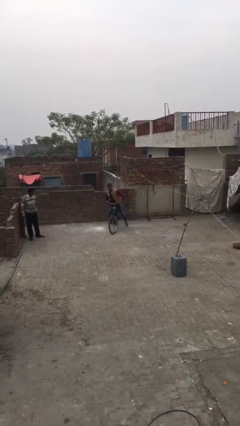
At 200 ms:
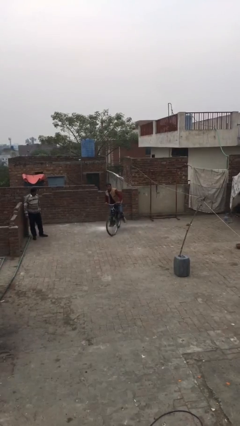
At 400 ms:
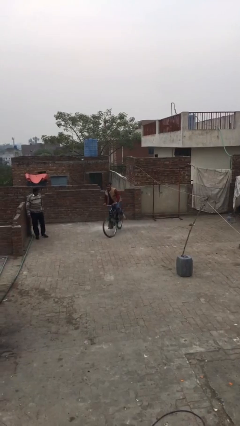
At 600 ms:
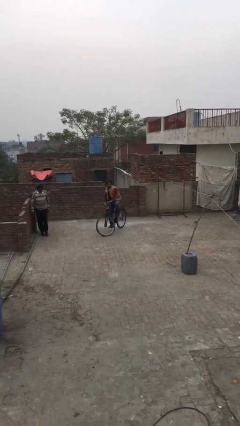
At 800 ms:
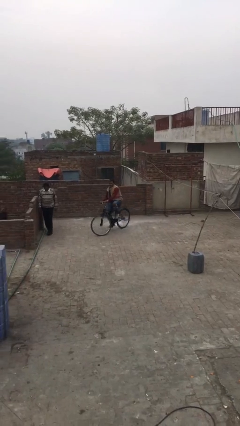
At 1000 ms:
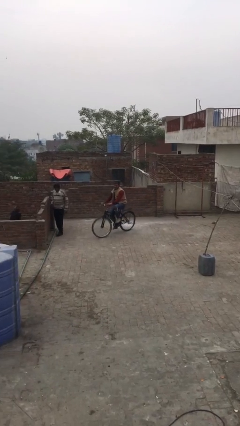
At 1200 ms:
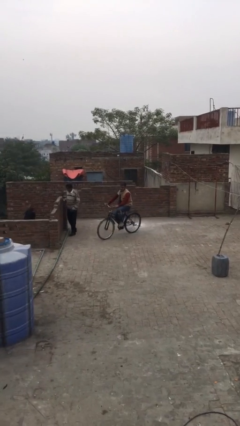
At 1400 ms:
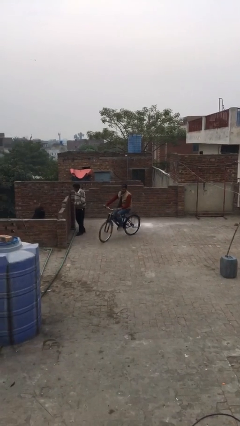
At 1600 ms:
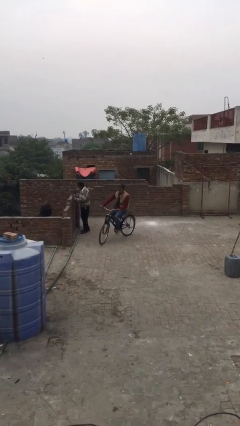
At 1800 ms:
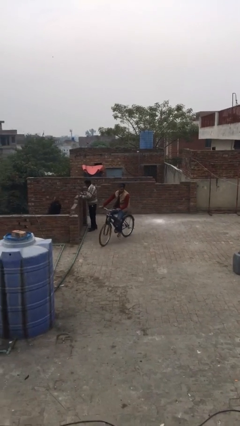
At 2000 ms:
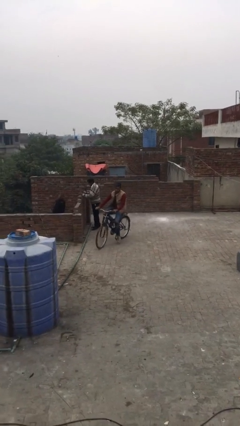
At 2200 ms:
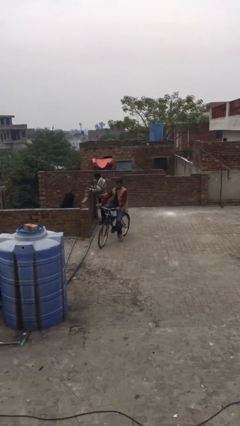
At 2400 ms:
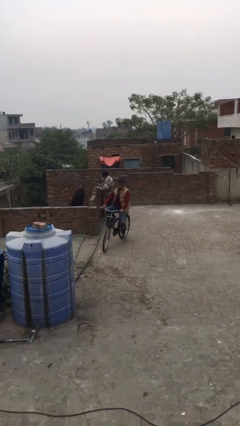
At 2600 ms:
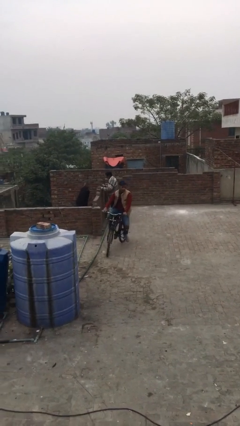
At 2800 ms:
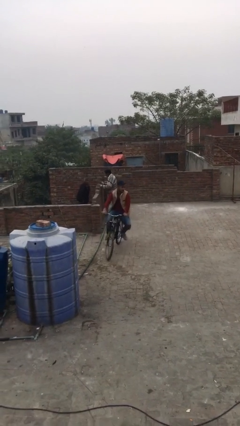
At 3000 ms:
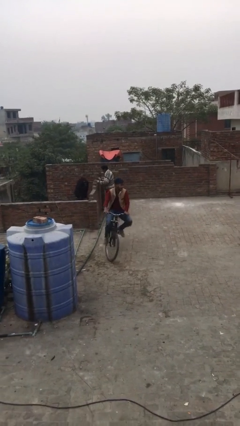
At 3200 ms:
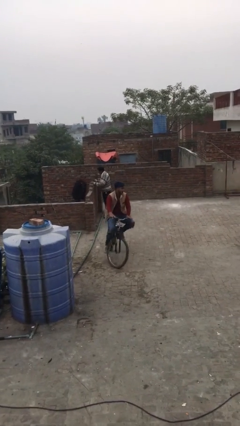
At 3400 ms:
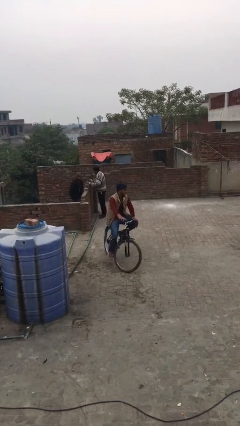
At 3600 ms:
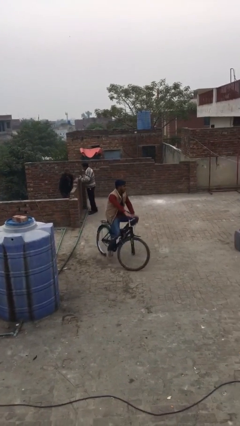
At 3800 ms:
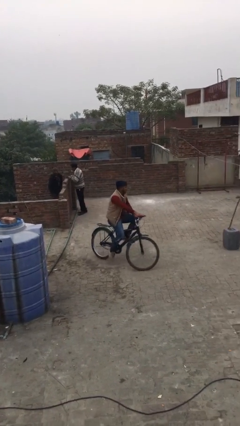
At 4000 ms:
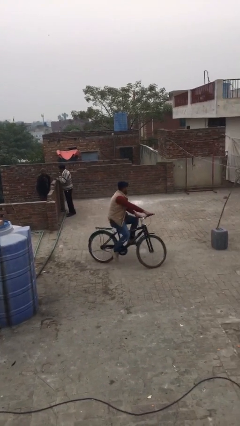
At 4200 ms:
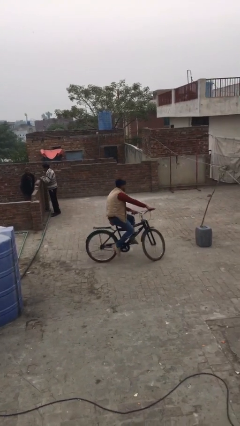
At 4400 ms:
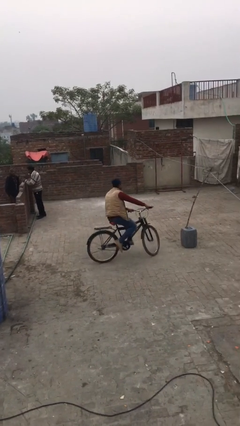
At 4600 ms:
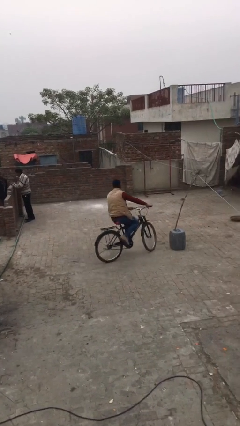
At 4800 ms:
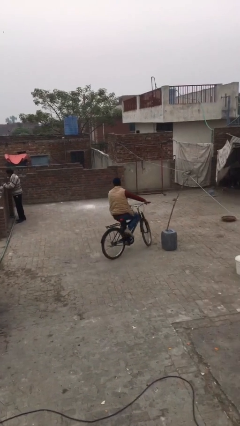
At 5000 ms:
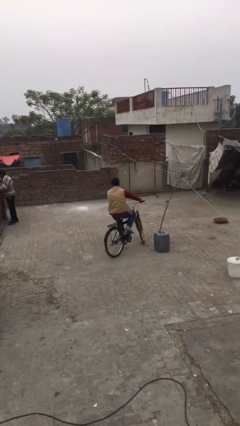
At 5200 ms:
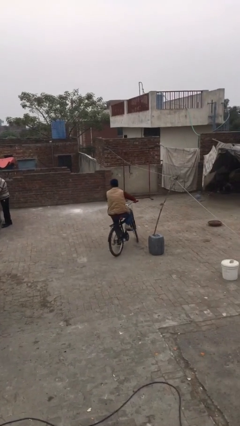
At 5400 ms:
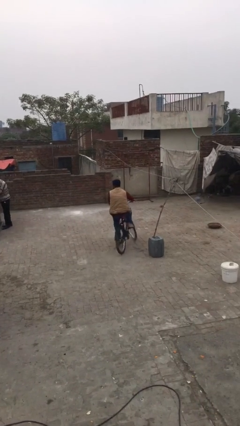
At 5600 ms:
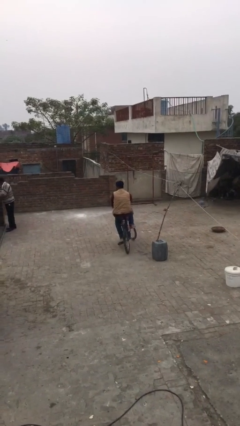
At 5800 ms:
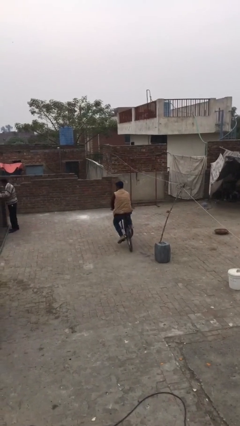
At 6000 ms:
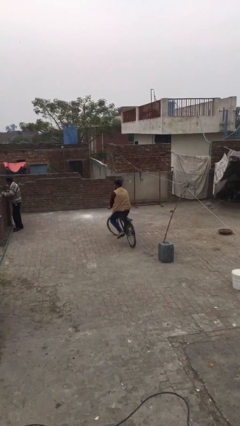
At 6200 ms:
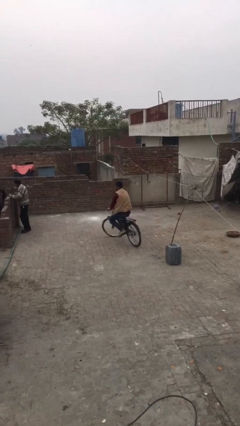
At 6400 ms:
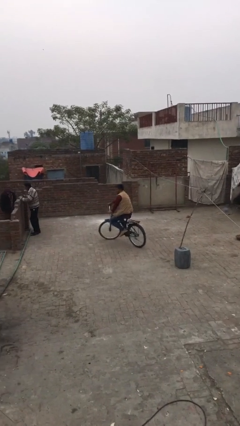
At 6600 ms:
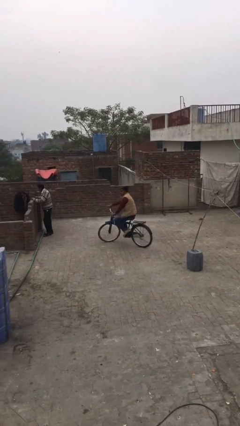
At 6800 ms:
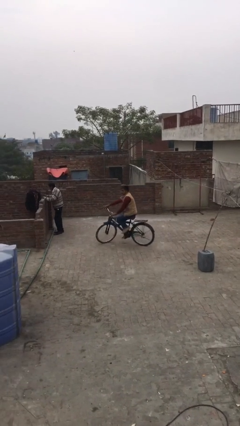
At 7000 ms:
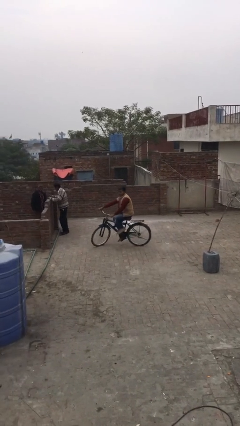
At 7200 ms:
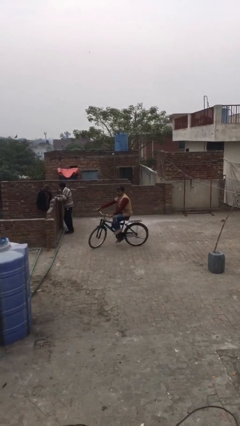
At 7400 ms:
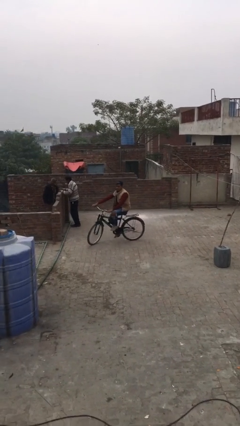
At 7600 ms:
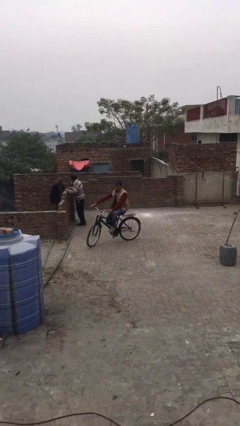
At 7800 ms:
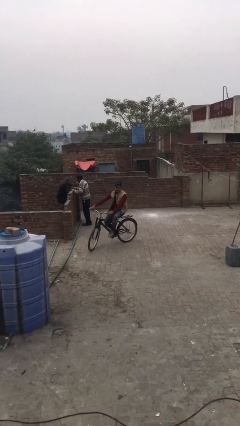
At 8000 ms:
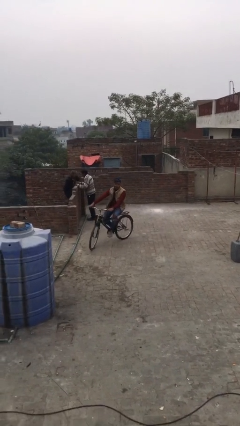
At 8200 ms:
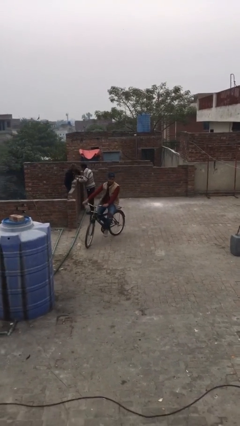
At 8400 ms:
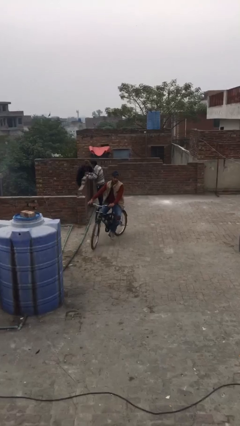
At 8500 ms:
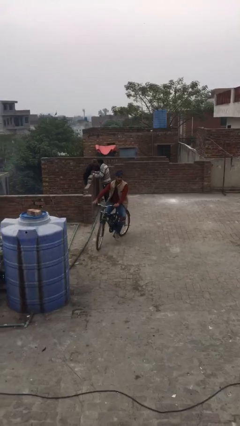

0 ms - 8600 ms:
person rides bicycle

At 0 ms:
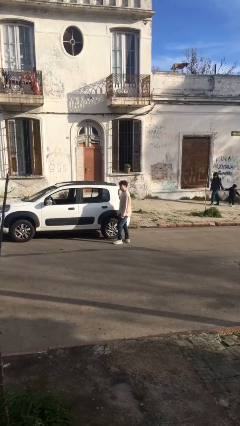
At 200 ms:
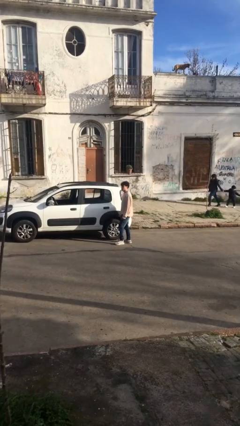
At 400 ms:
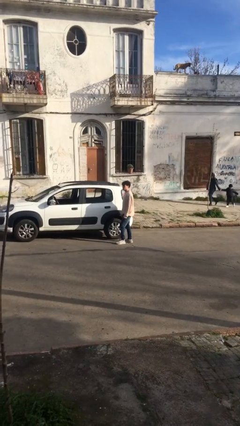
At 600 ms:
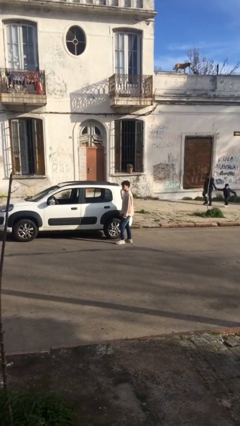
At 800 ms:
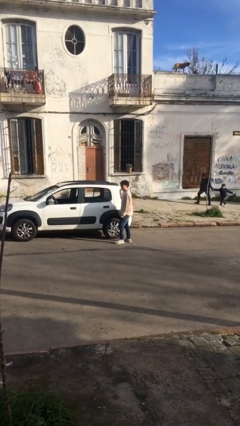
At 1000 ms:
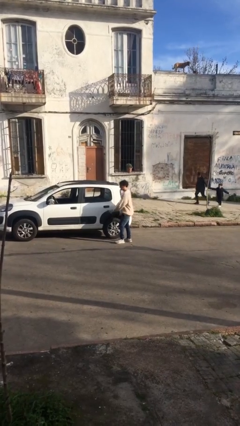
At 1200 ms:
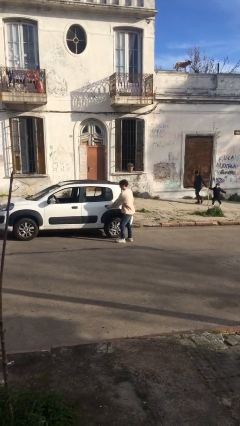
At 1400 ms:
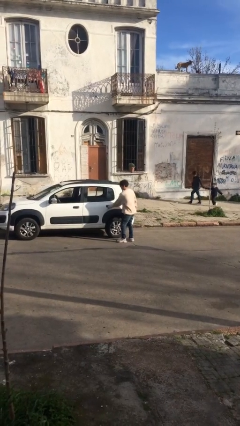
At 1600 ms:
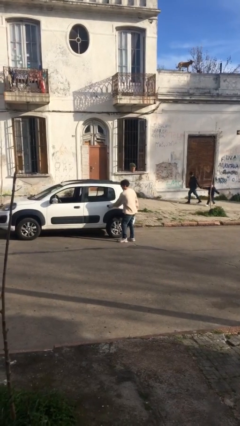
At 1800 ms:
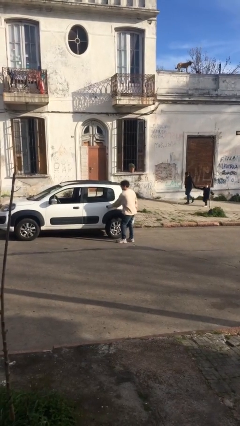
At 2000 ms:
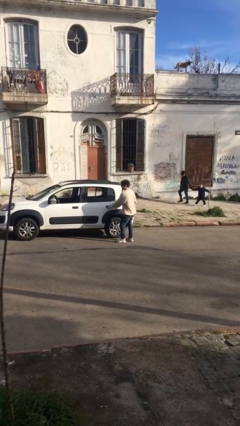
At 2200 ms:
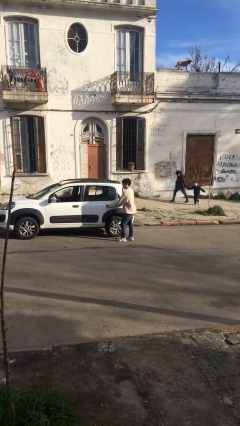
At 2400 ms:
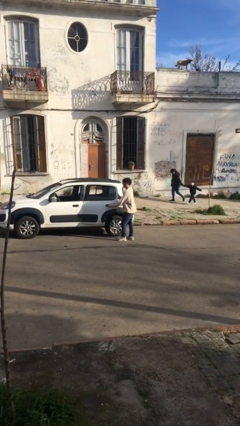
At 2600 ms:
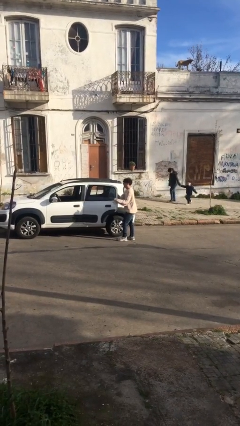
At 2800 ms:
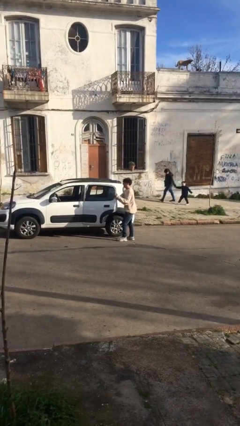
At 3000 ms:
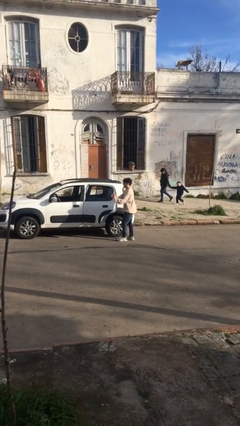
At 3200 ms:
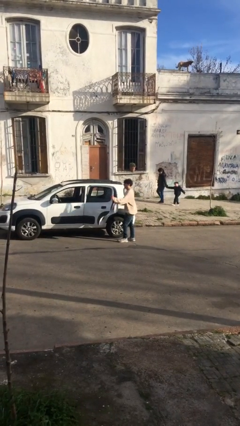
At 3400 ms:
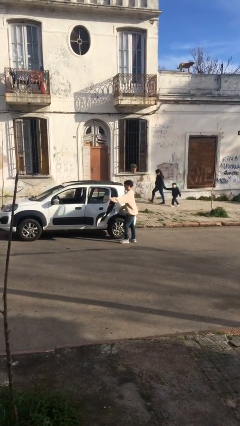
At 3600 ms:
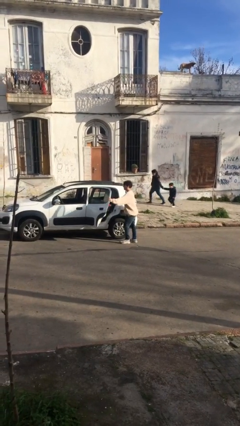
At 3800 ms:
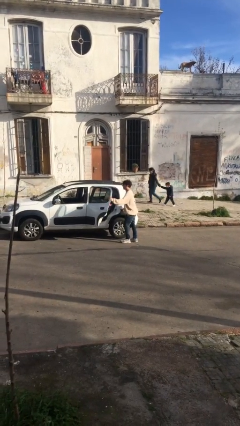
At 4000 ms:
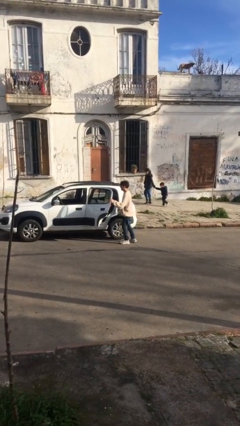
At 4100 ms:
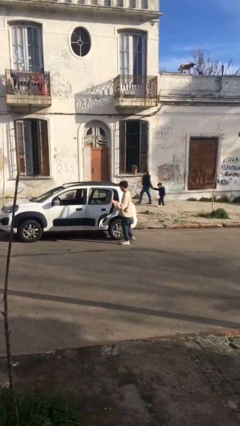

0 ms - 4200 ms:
person opens car door

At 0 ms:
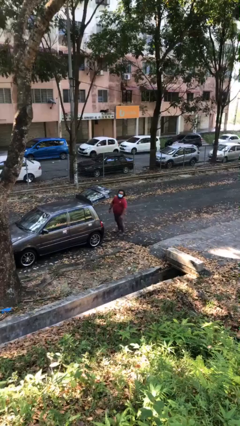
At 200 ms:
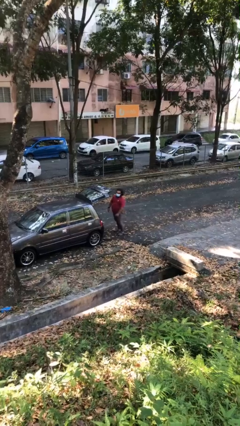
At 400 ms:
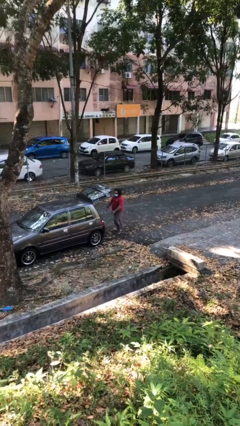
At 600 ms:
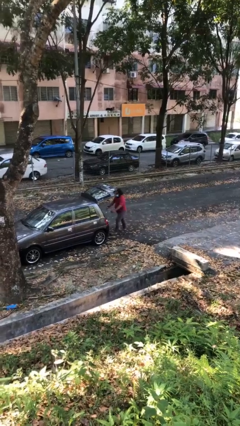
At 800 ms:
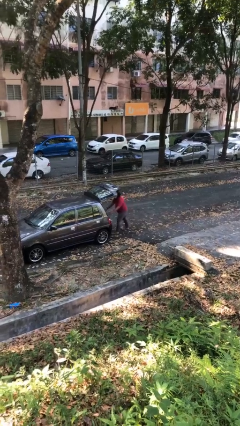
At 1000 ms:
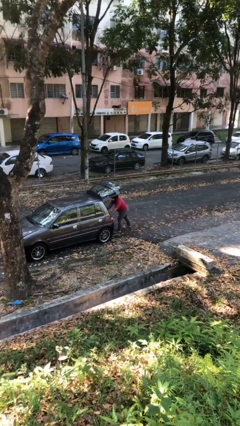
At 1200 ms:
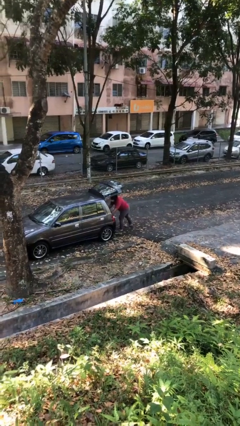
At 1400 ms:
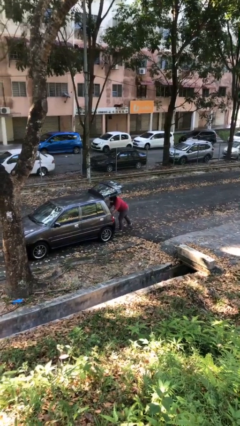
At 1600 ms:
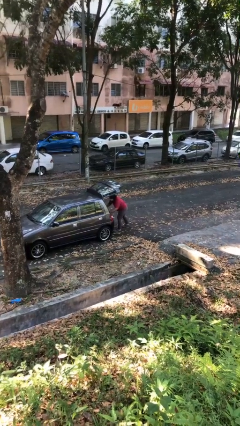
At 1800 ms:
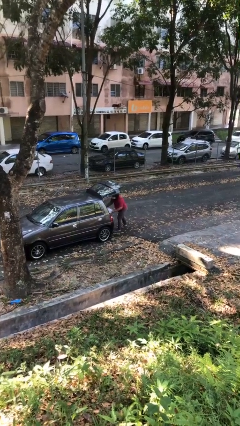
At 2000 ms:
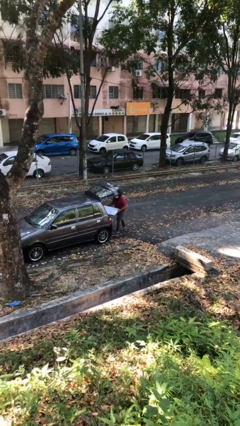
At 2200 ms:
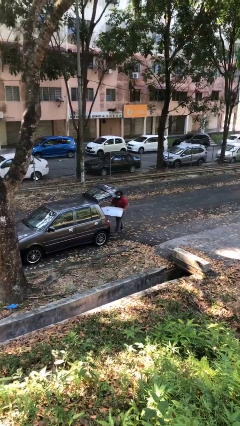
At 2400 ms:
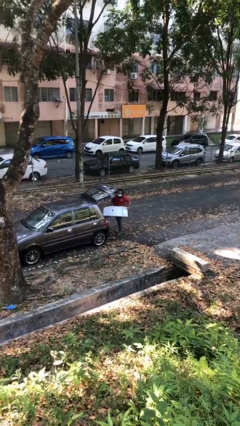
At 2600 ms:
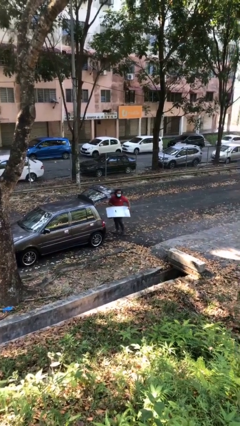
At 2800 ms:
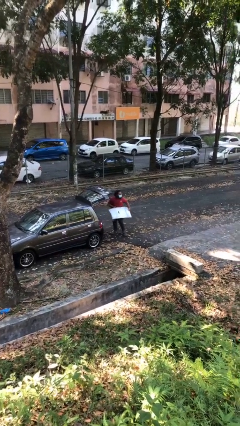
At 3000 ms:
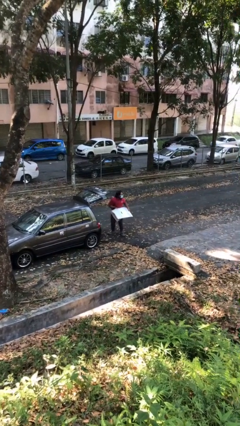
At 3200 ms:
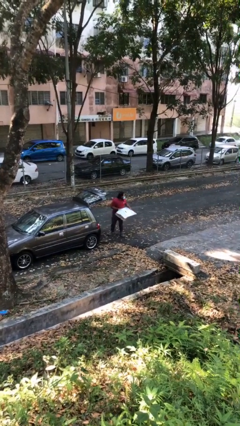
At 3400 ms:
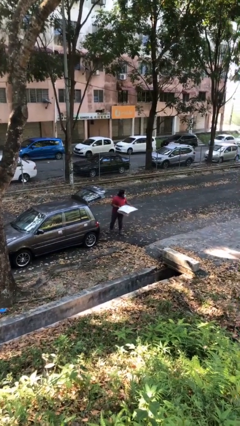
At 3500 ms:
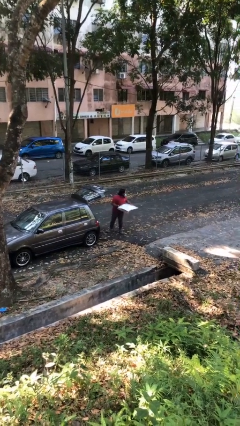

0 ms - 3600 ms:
person unloads car

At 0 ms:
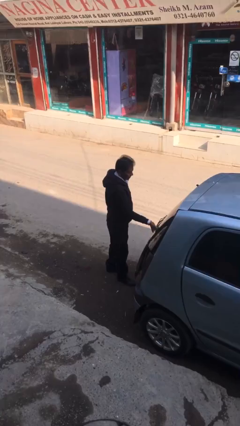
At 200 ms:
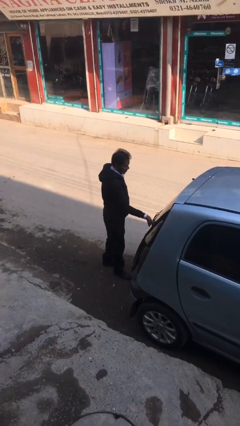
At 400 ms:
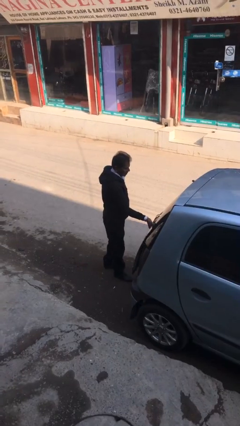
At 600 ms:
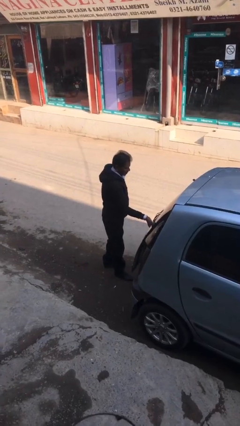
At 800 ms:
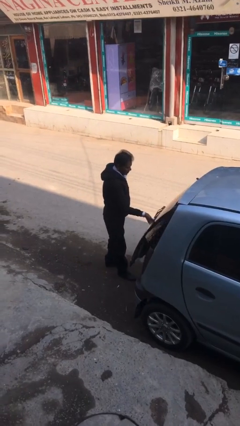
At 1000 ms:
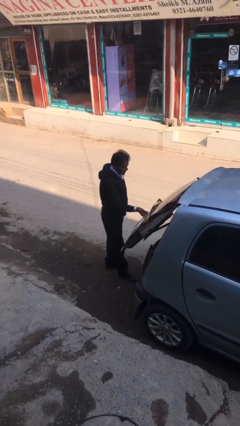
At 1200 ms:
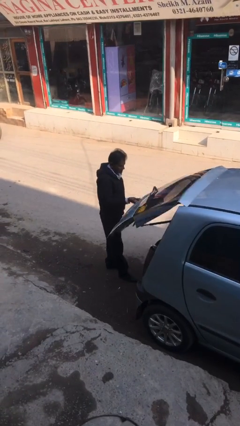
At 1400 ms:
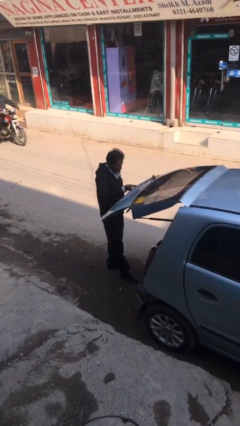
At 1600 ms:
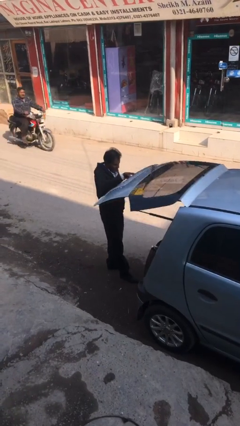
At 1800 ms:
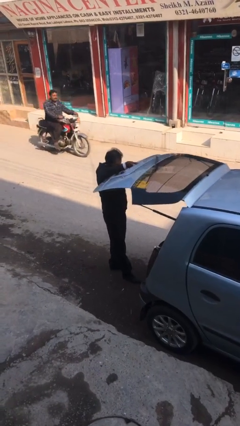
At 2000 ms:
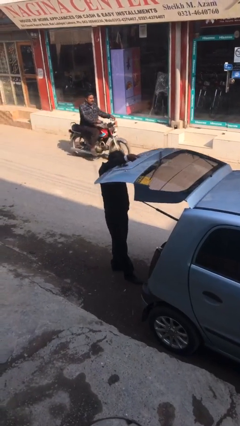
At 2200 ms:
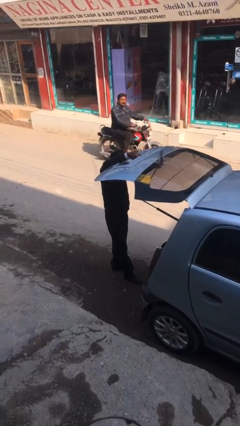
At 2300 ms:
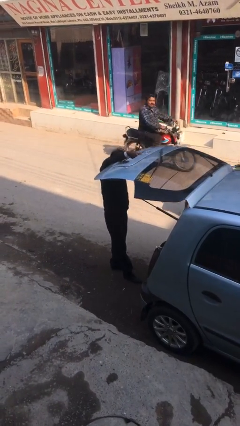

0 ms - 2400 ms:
person opens car trunk
